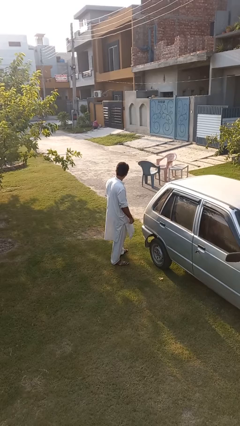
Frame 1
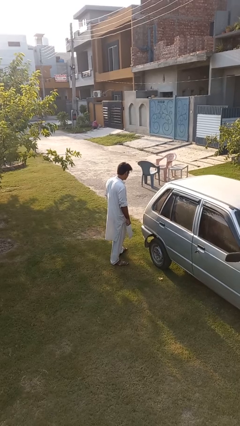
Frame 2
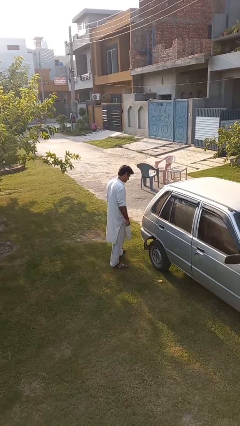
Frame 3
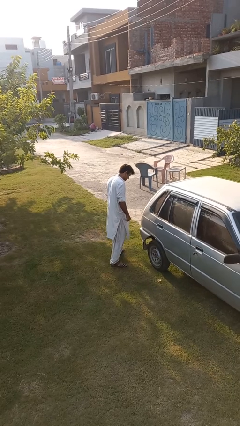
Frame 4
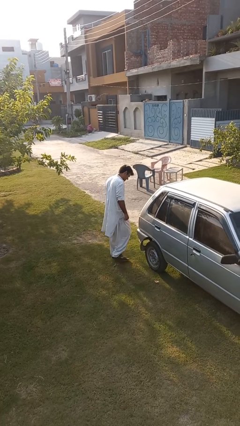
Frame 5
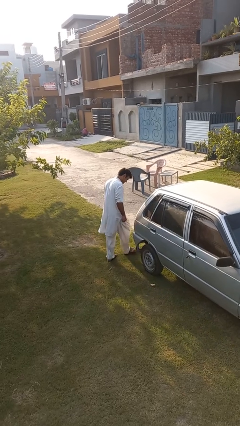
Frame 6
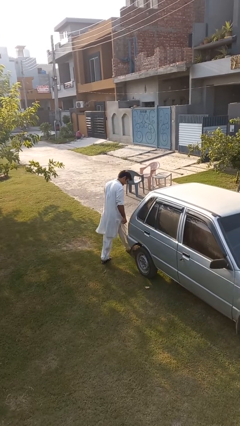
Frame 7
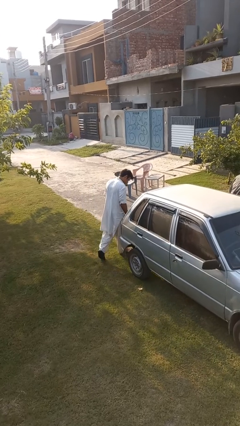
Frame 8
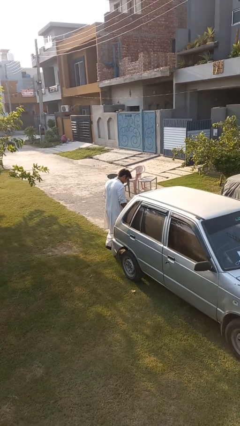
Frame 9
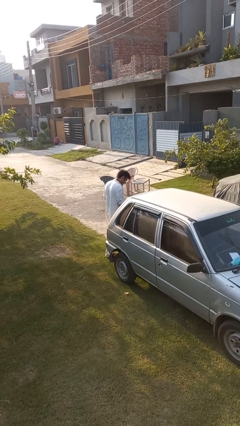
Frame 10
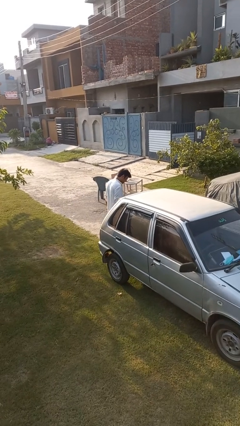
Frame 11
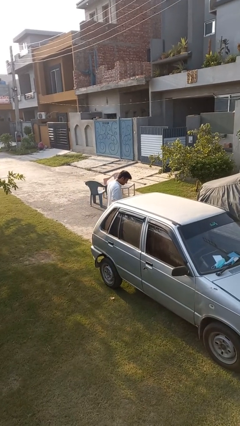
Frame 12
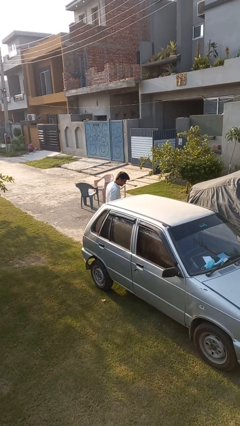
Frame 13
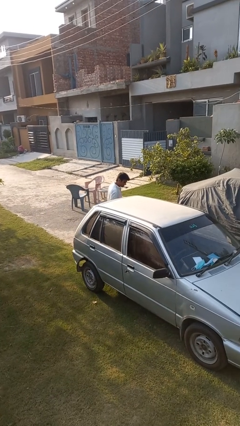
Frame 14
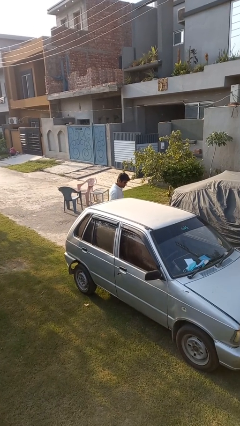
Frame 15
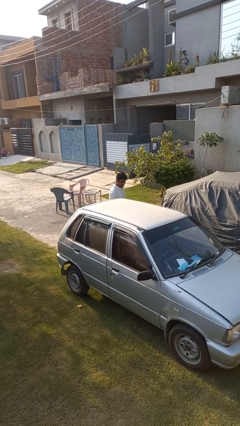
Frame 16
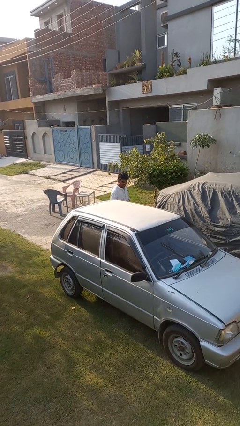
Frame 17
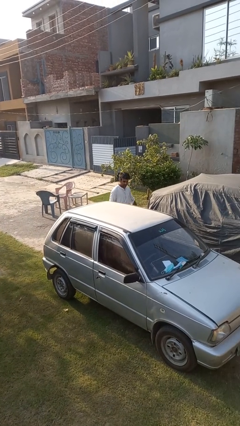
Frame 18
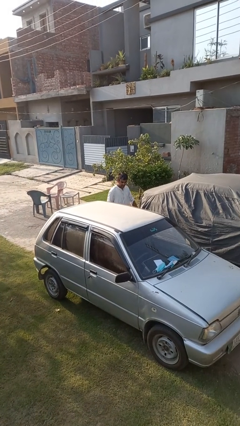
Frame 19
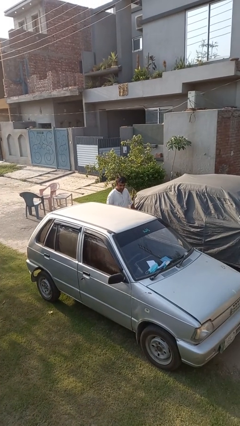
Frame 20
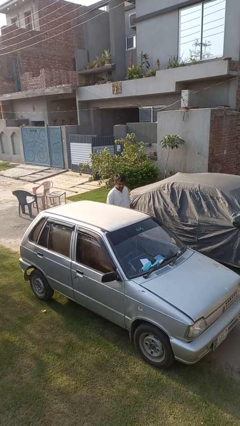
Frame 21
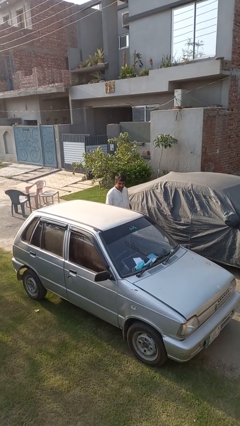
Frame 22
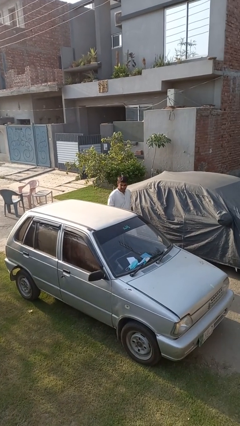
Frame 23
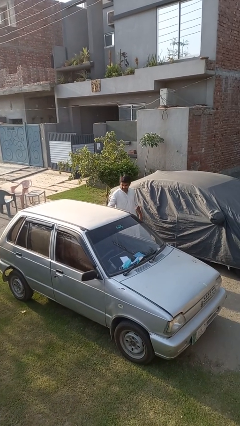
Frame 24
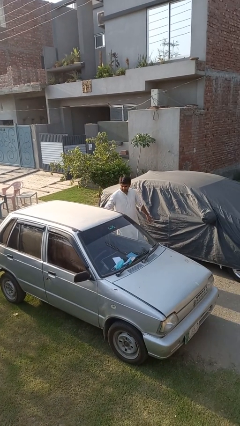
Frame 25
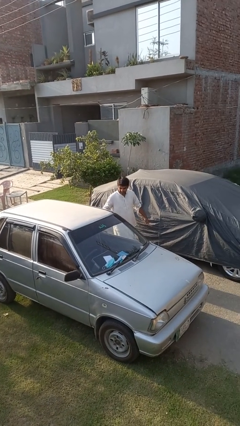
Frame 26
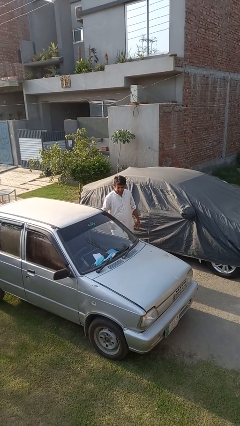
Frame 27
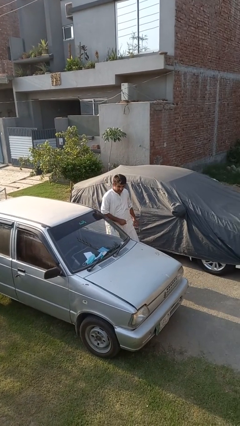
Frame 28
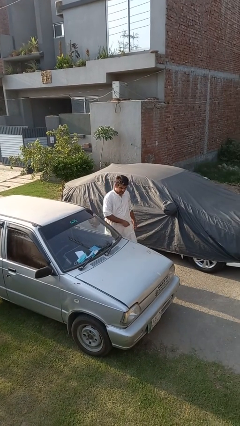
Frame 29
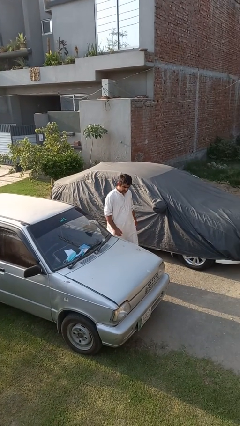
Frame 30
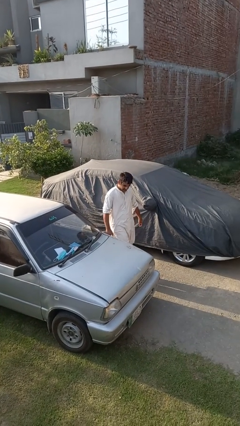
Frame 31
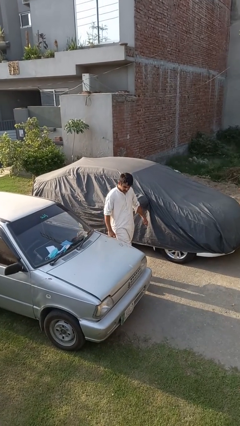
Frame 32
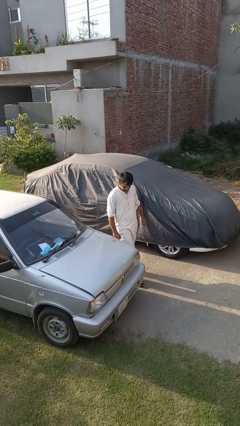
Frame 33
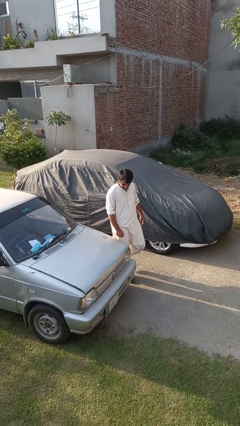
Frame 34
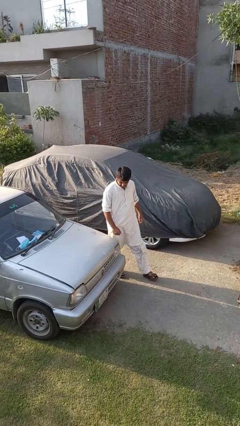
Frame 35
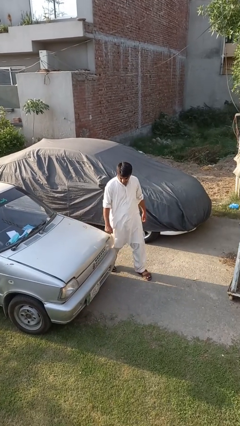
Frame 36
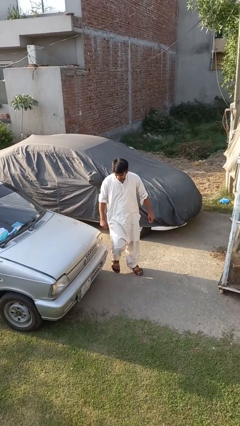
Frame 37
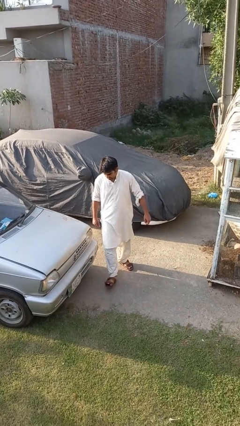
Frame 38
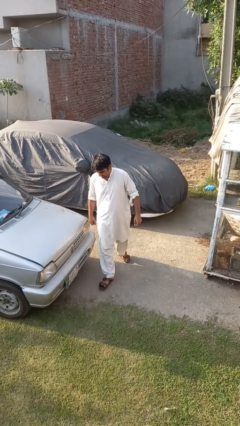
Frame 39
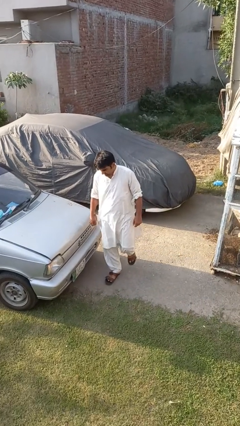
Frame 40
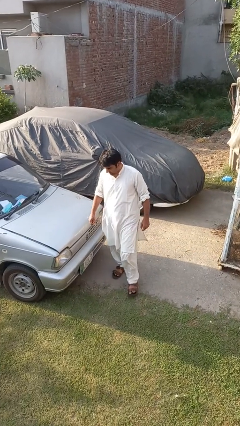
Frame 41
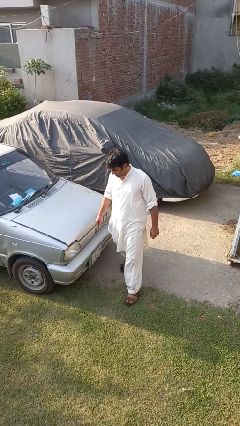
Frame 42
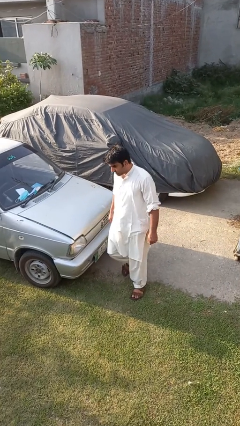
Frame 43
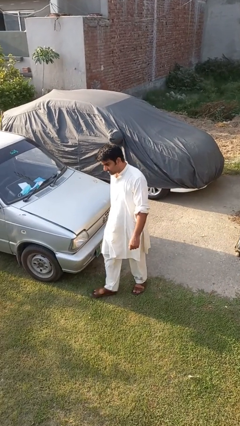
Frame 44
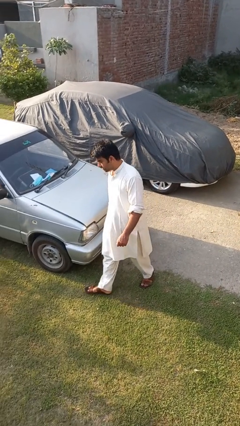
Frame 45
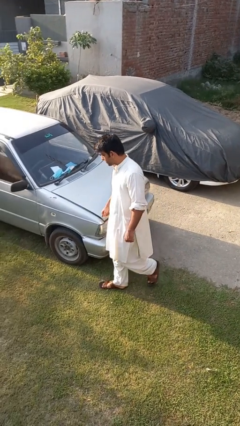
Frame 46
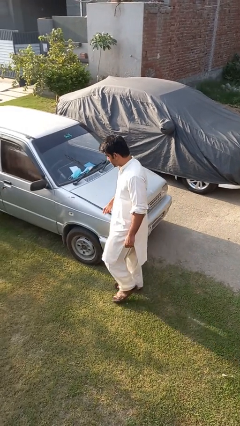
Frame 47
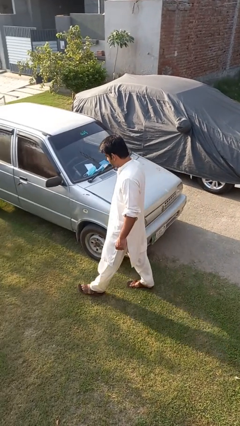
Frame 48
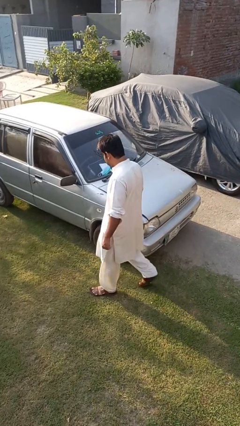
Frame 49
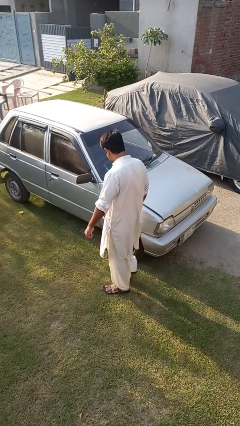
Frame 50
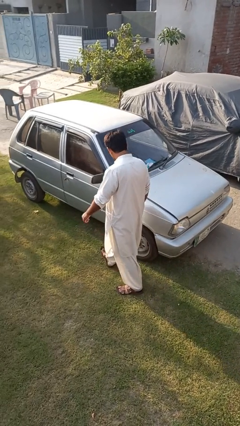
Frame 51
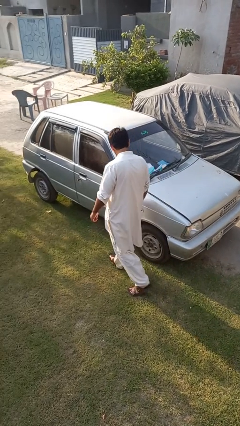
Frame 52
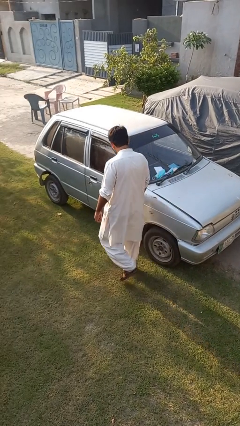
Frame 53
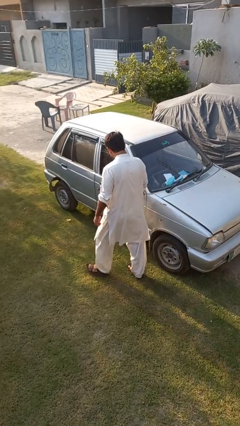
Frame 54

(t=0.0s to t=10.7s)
person walks around car

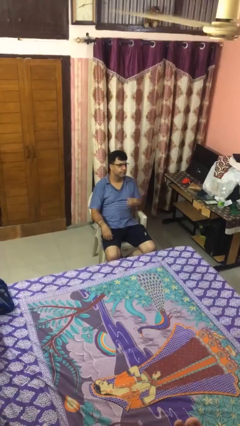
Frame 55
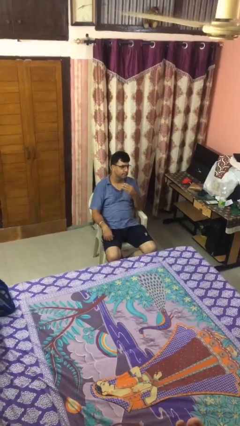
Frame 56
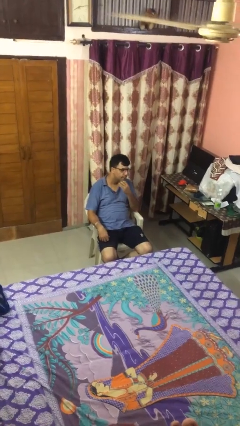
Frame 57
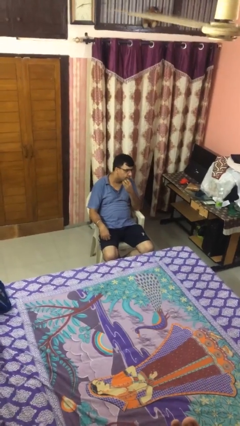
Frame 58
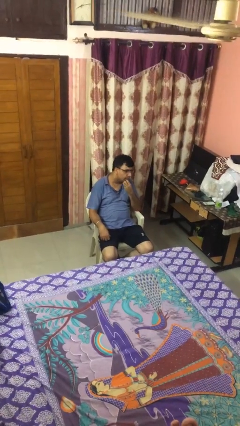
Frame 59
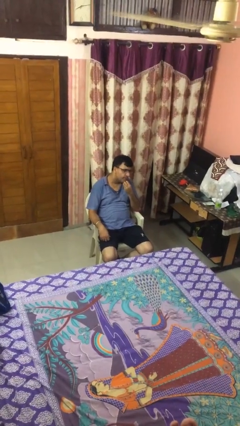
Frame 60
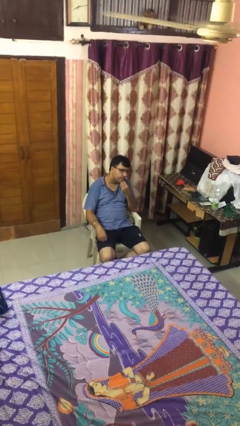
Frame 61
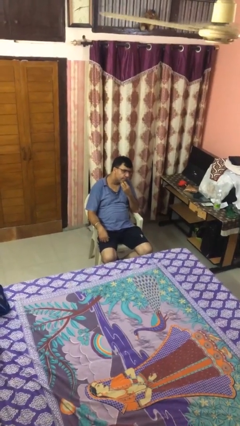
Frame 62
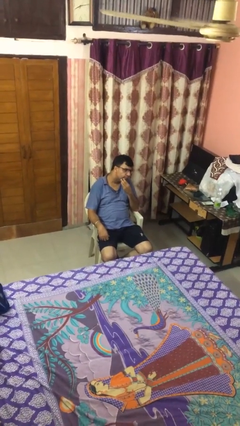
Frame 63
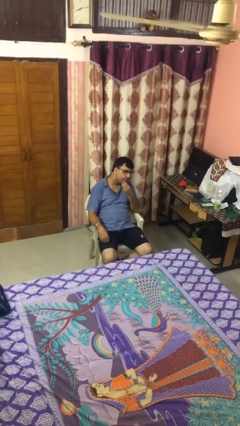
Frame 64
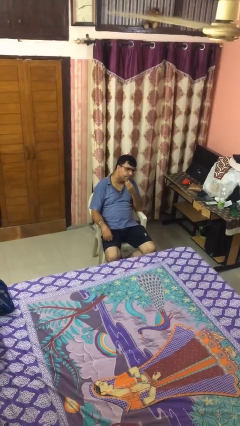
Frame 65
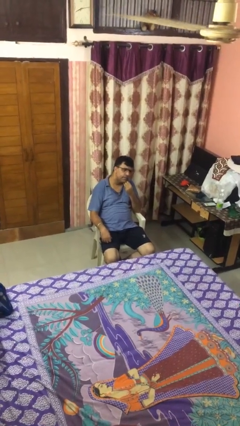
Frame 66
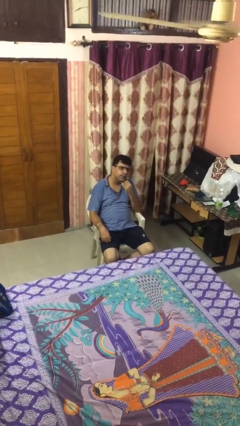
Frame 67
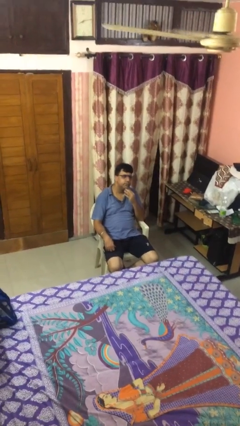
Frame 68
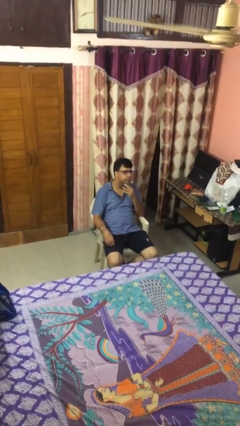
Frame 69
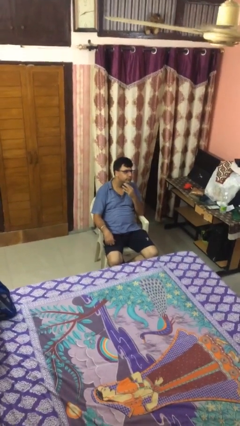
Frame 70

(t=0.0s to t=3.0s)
person strokes chin

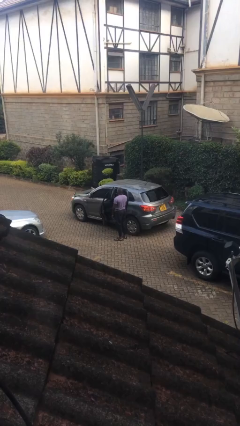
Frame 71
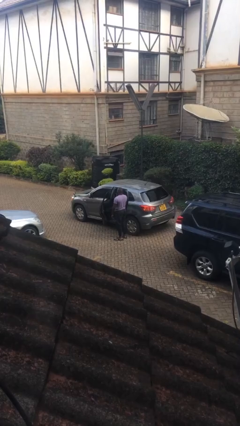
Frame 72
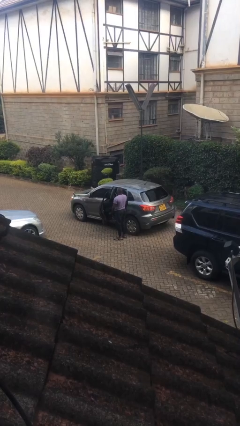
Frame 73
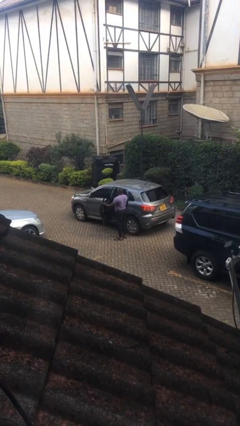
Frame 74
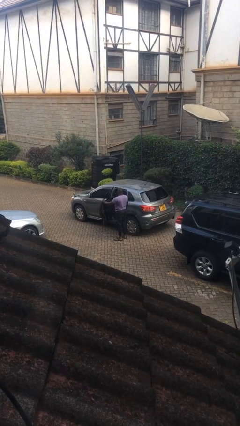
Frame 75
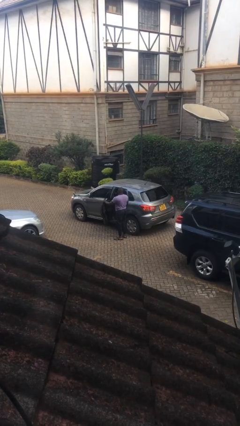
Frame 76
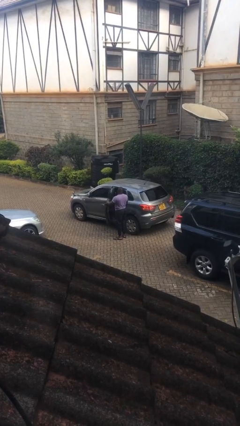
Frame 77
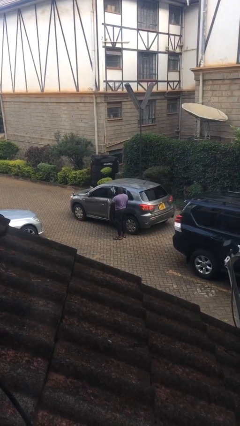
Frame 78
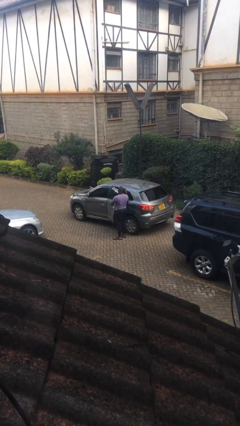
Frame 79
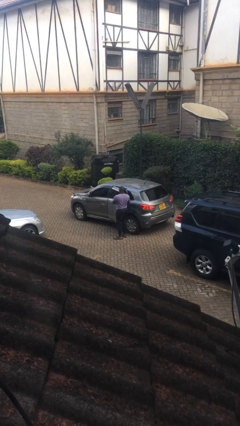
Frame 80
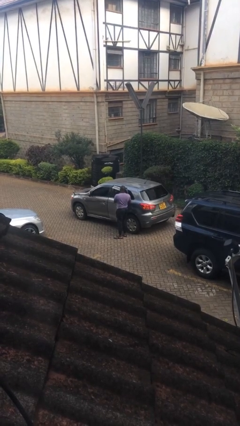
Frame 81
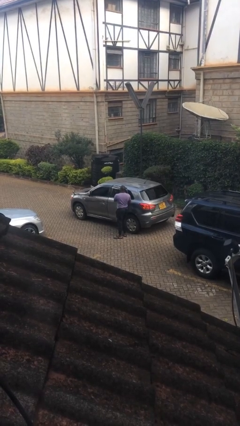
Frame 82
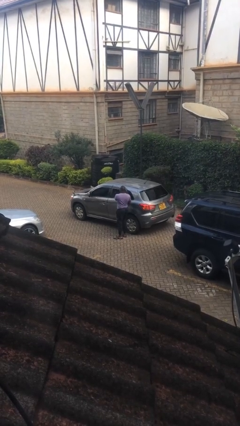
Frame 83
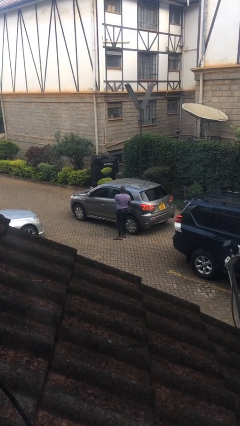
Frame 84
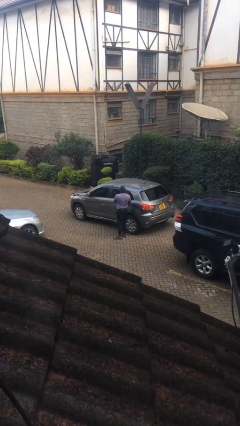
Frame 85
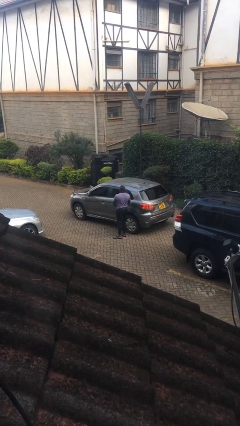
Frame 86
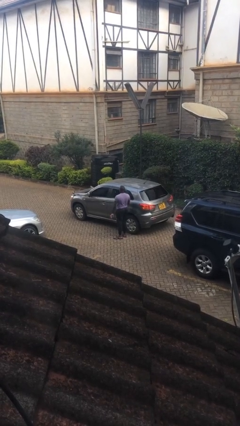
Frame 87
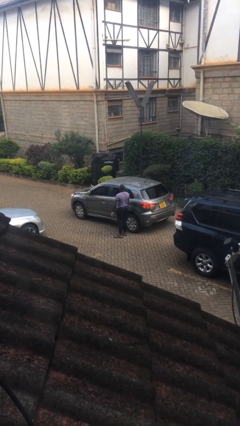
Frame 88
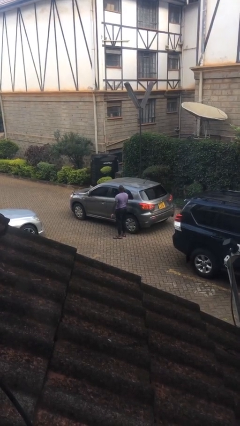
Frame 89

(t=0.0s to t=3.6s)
person closes car door

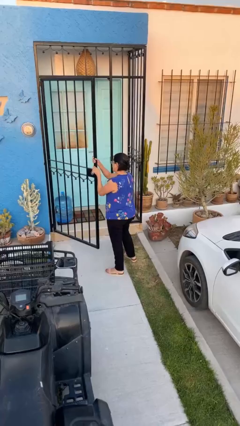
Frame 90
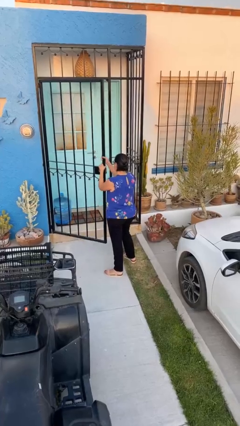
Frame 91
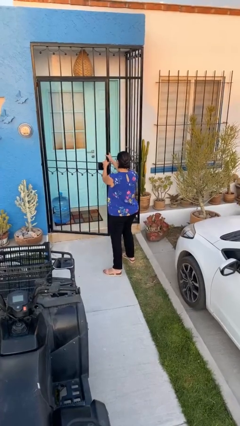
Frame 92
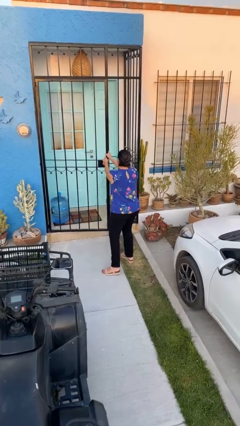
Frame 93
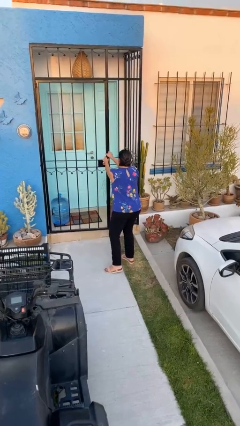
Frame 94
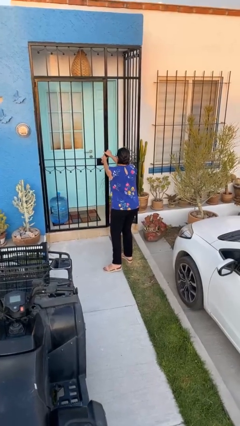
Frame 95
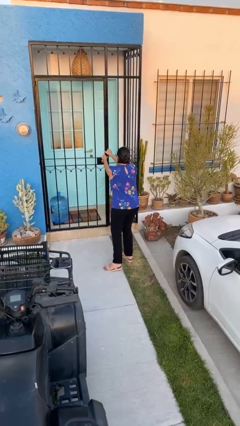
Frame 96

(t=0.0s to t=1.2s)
person closes facility door
